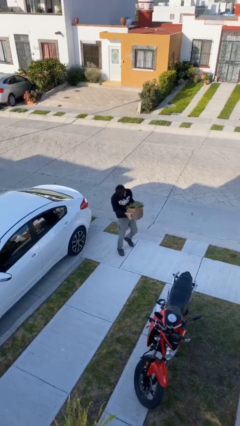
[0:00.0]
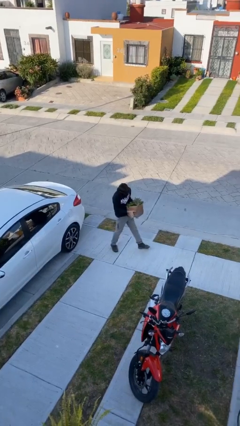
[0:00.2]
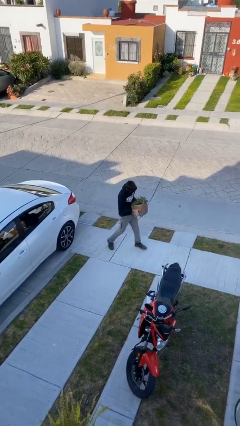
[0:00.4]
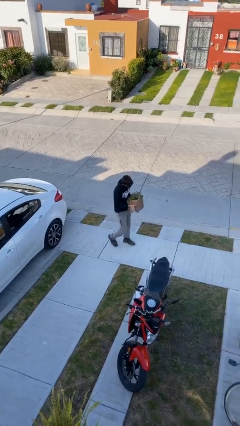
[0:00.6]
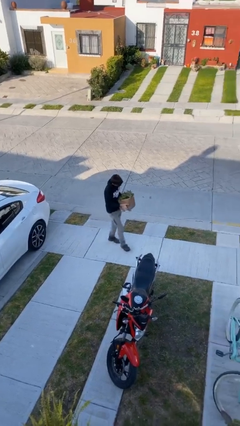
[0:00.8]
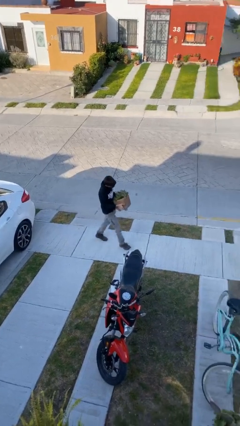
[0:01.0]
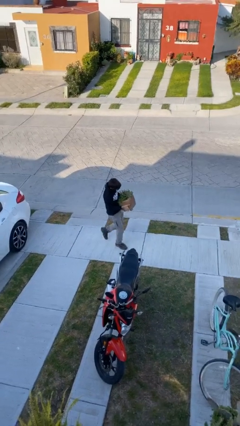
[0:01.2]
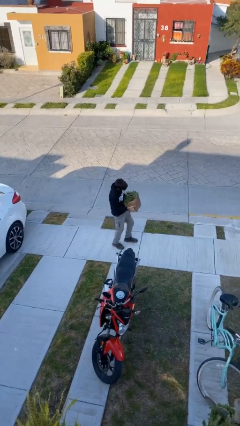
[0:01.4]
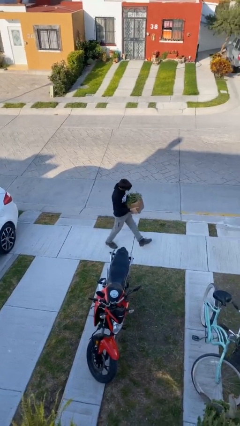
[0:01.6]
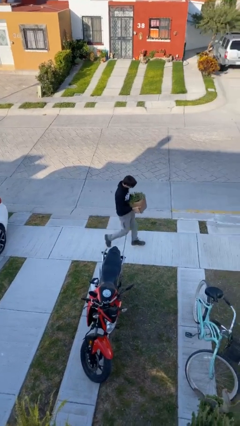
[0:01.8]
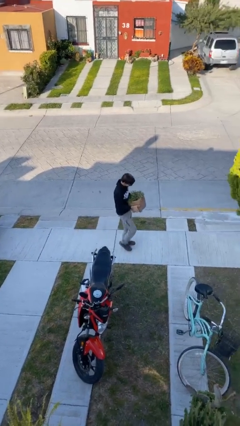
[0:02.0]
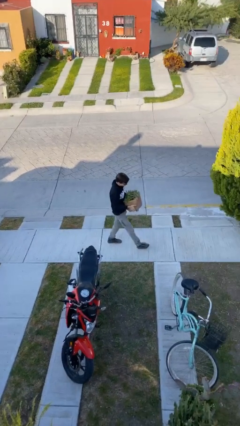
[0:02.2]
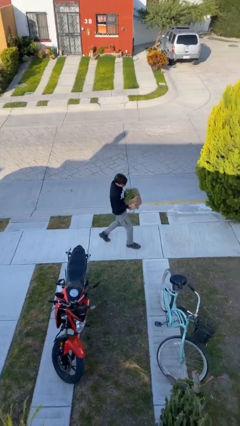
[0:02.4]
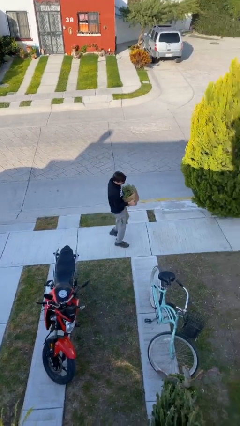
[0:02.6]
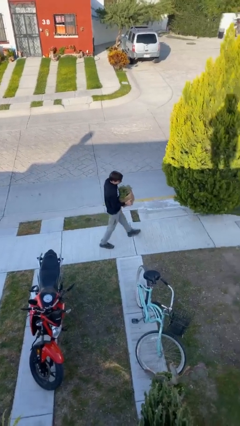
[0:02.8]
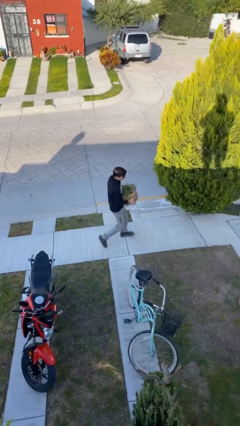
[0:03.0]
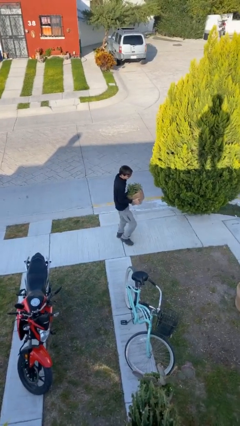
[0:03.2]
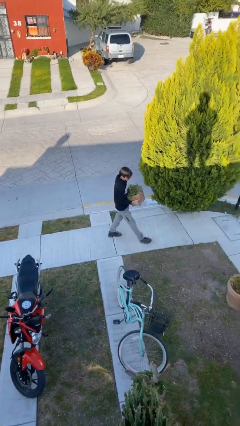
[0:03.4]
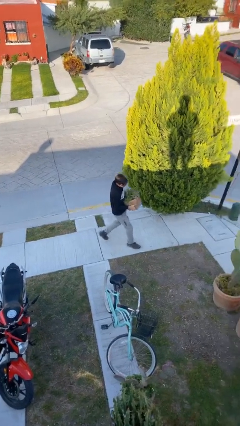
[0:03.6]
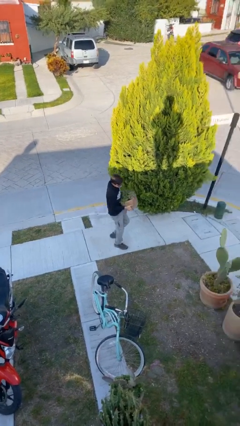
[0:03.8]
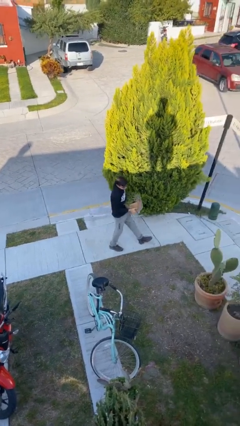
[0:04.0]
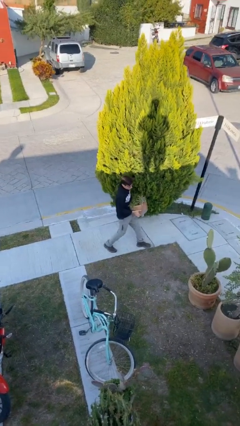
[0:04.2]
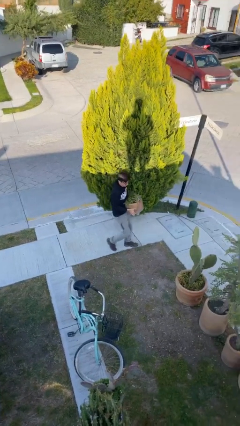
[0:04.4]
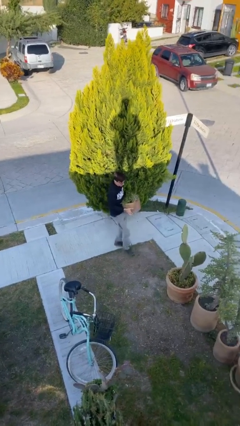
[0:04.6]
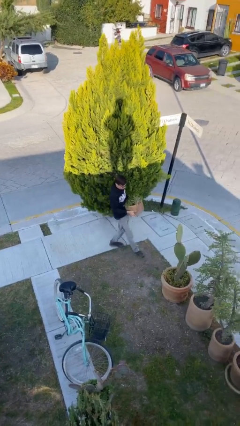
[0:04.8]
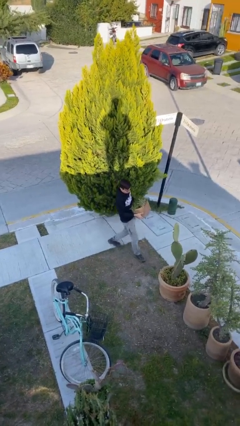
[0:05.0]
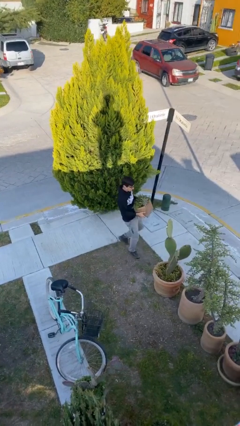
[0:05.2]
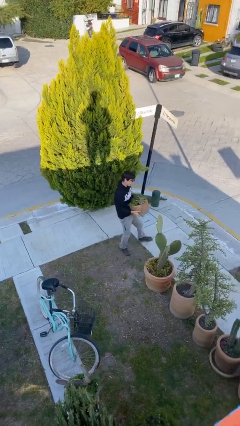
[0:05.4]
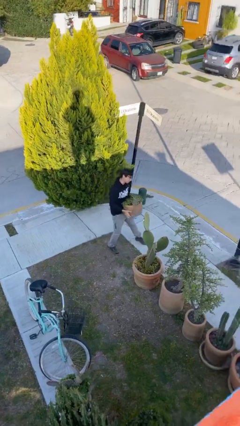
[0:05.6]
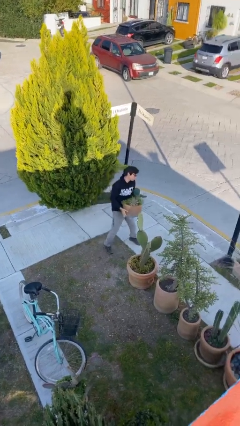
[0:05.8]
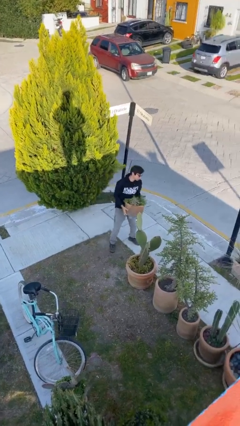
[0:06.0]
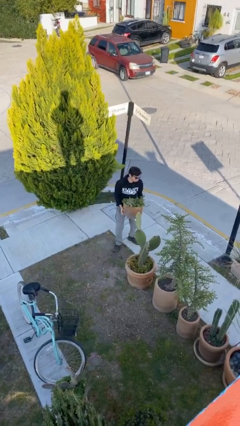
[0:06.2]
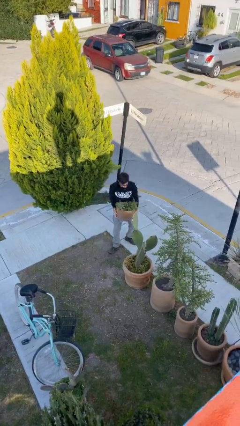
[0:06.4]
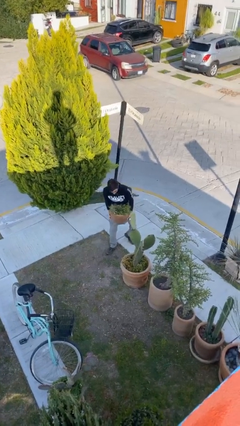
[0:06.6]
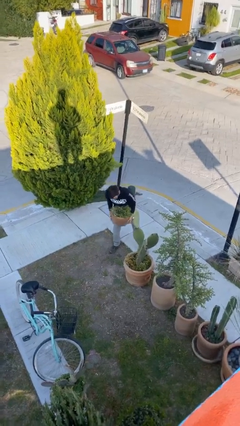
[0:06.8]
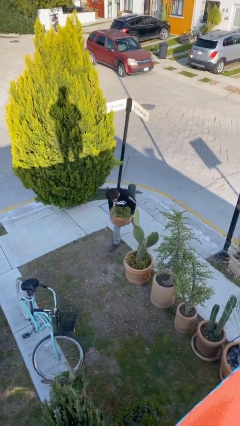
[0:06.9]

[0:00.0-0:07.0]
person carries heavy object

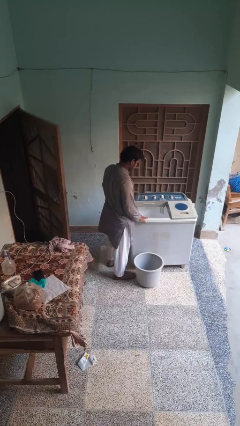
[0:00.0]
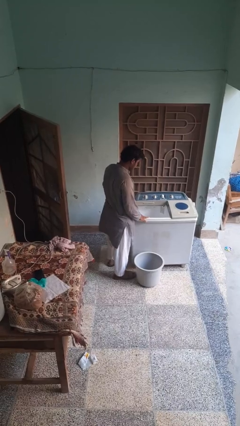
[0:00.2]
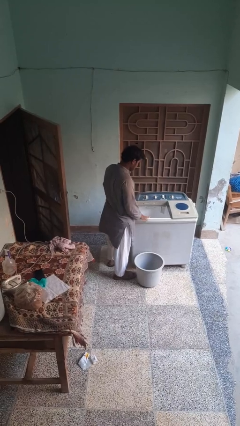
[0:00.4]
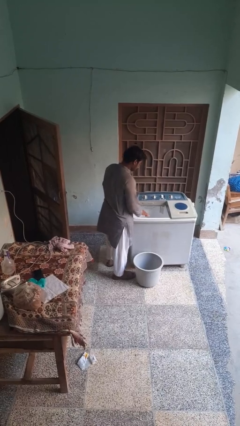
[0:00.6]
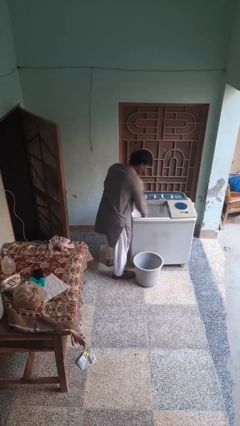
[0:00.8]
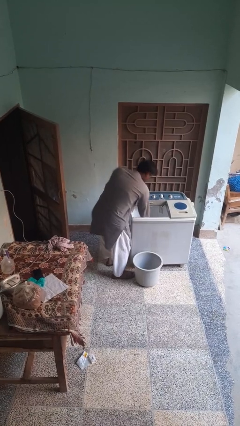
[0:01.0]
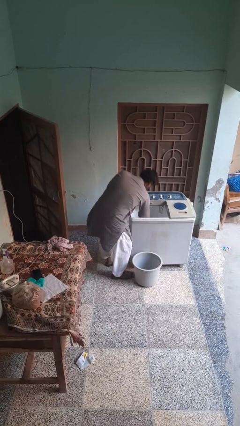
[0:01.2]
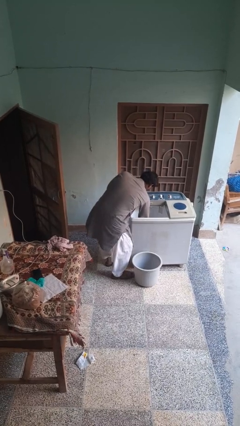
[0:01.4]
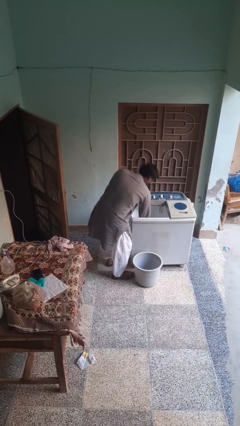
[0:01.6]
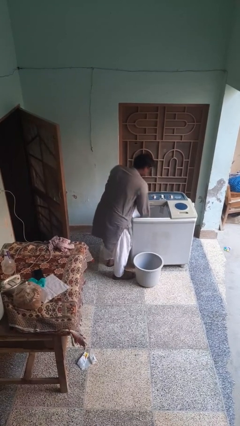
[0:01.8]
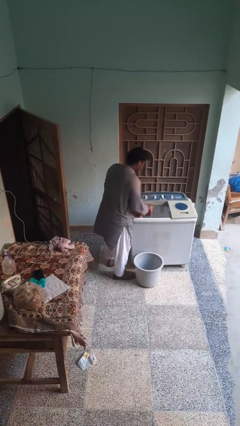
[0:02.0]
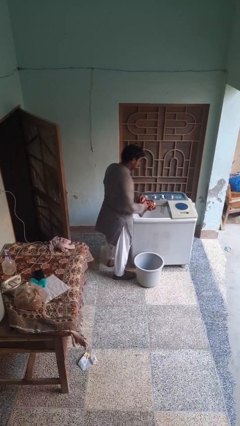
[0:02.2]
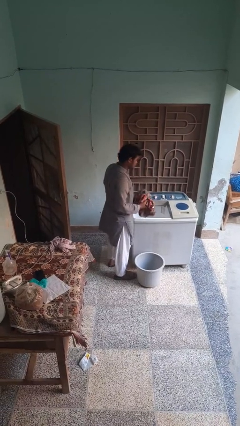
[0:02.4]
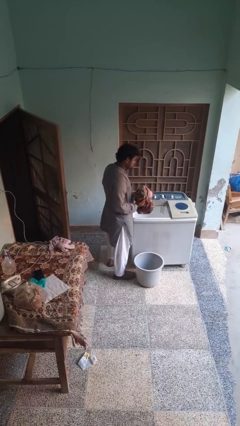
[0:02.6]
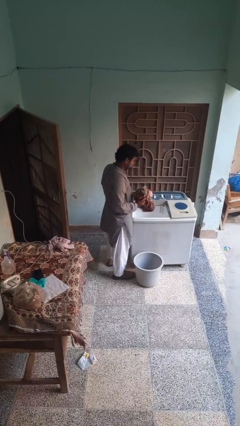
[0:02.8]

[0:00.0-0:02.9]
person unloads clotheswasher

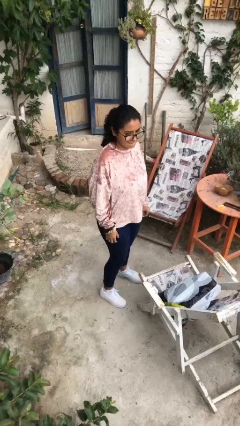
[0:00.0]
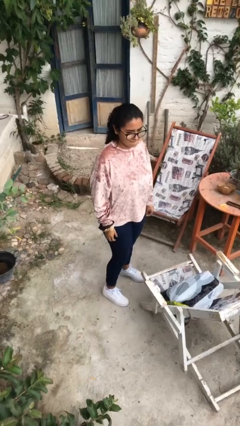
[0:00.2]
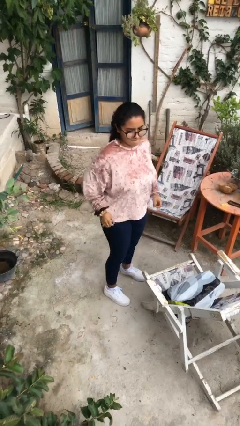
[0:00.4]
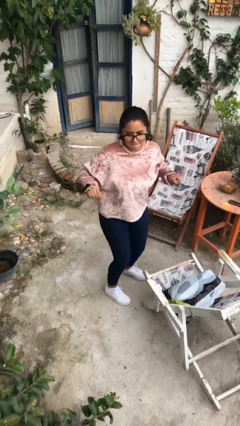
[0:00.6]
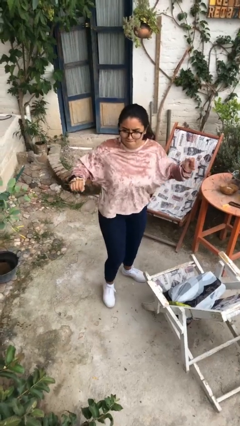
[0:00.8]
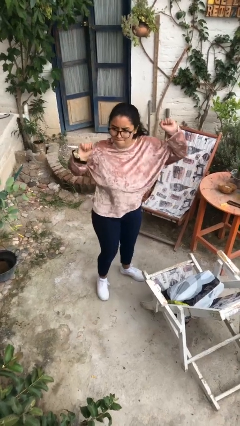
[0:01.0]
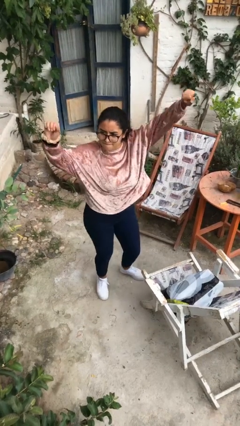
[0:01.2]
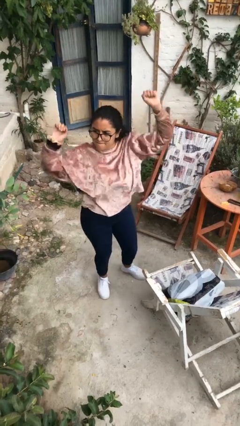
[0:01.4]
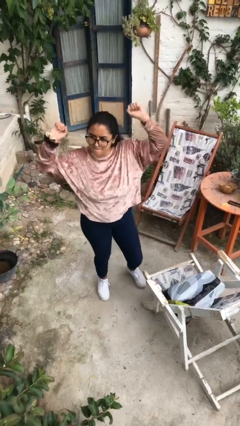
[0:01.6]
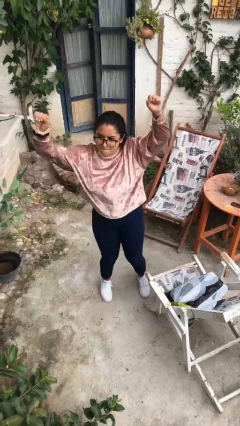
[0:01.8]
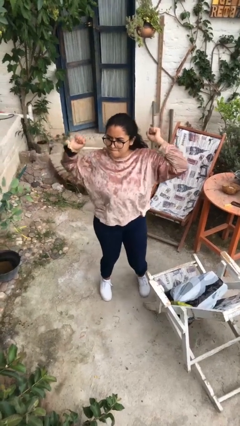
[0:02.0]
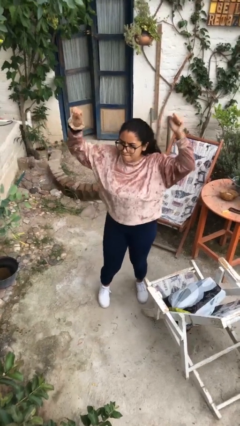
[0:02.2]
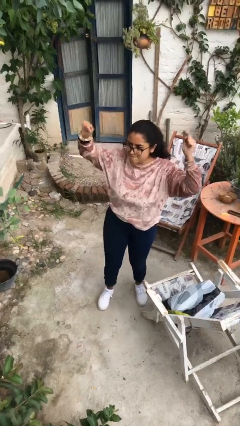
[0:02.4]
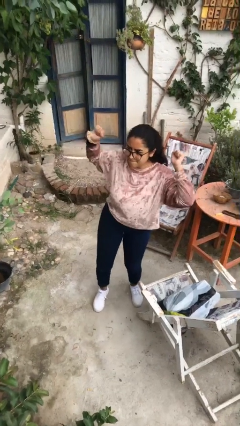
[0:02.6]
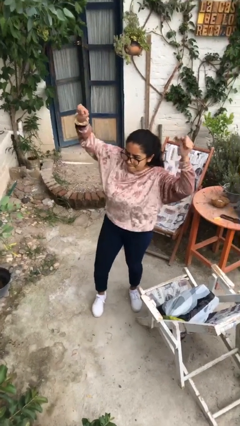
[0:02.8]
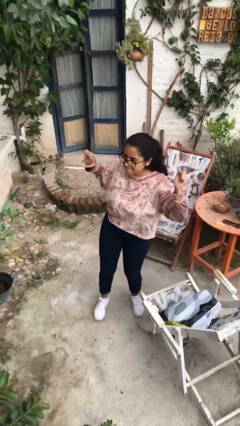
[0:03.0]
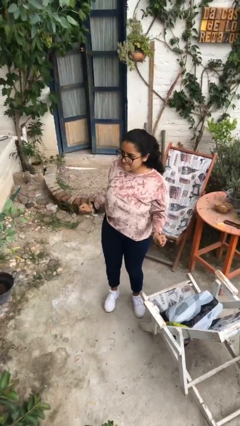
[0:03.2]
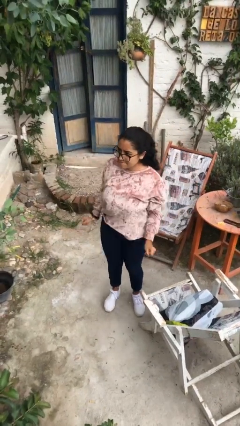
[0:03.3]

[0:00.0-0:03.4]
person dances in place

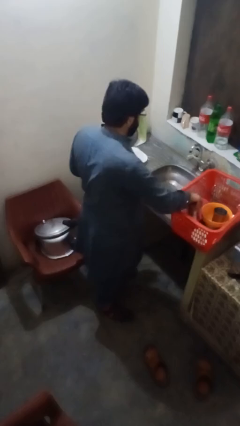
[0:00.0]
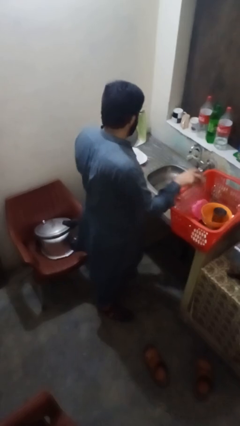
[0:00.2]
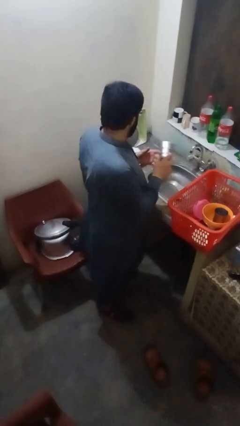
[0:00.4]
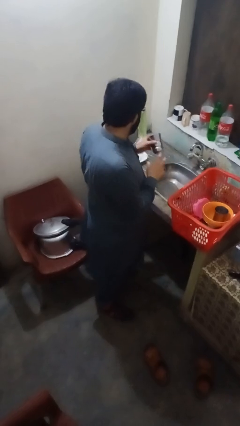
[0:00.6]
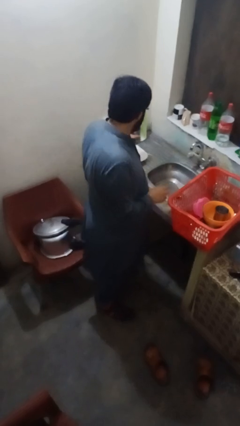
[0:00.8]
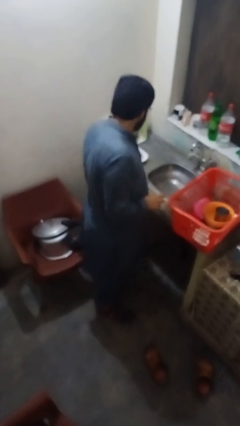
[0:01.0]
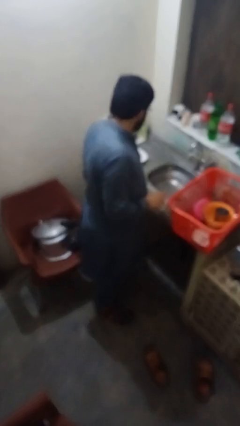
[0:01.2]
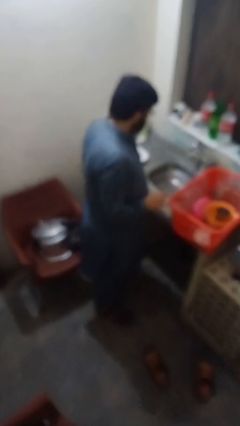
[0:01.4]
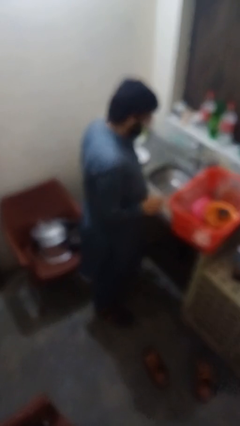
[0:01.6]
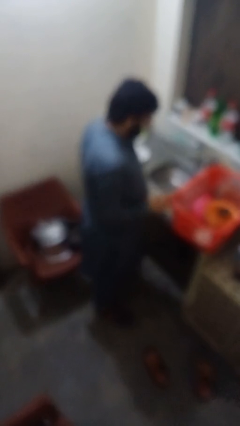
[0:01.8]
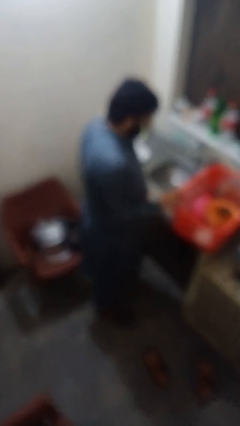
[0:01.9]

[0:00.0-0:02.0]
person unloads dishwasher

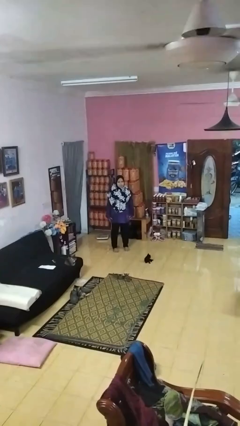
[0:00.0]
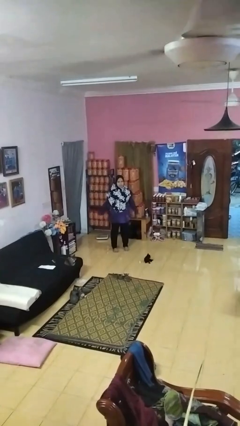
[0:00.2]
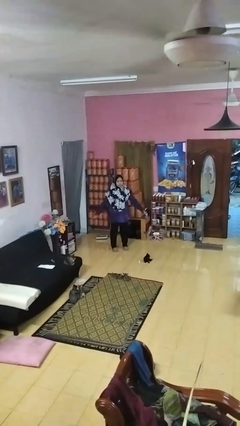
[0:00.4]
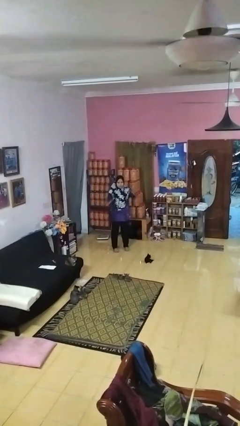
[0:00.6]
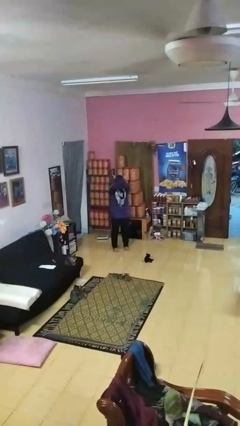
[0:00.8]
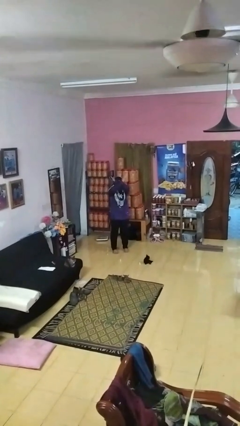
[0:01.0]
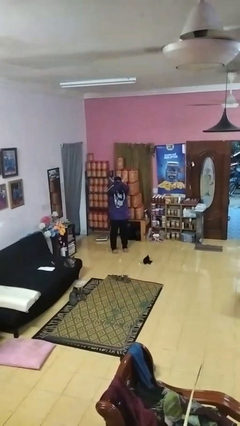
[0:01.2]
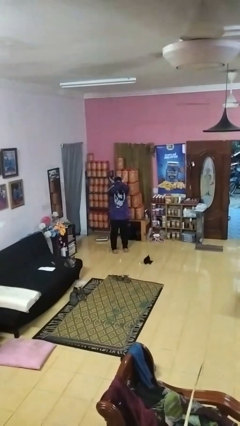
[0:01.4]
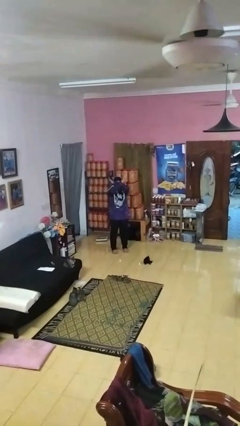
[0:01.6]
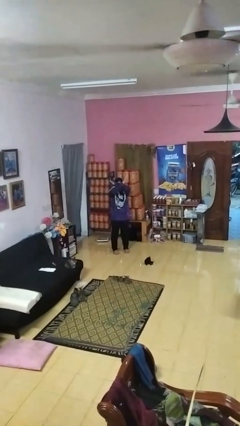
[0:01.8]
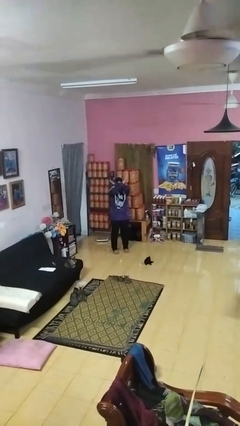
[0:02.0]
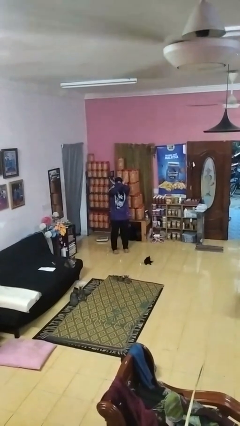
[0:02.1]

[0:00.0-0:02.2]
person gestures arms x

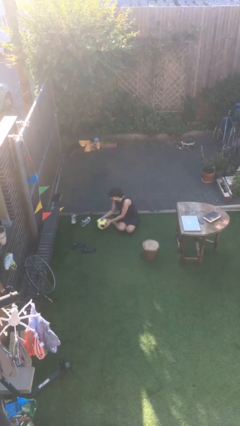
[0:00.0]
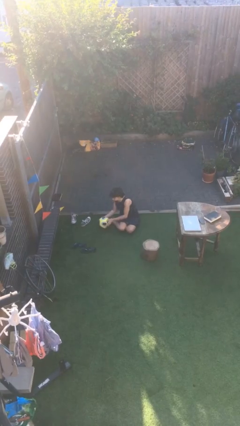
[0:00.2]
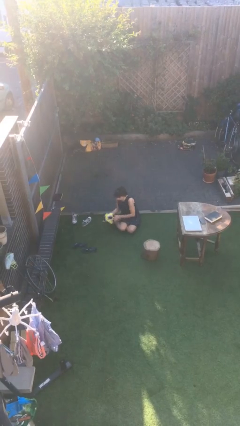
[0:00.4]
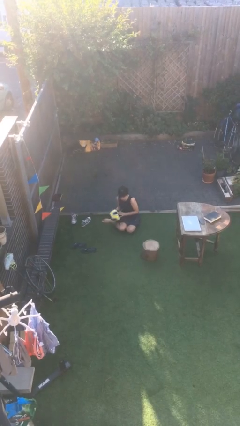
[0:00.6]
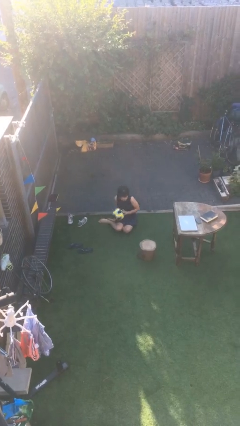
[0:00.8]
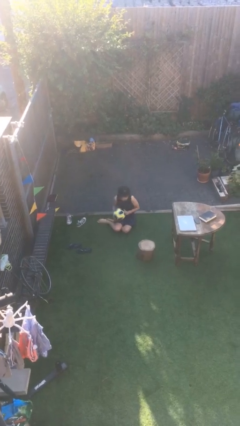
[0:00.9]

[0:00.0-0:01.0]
person picks up object from floor
